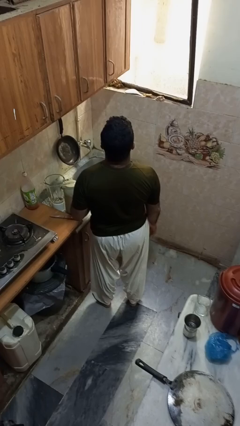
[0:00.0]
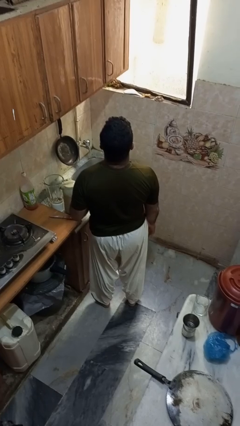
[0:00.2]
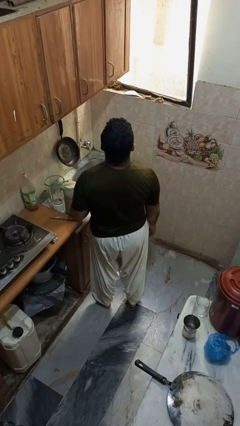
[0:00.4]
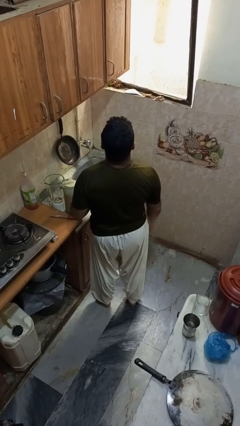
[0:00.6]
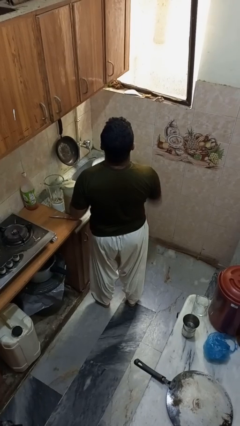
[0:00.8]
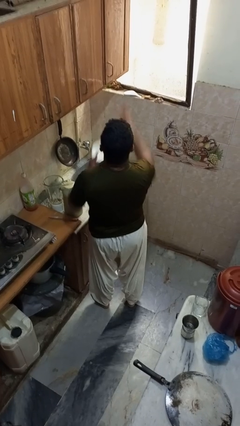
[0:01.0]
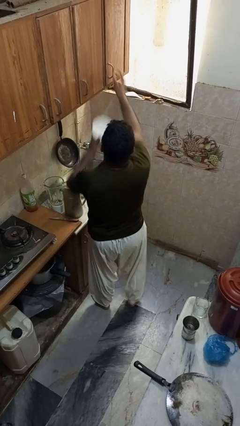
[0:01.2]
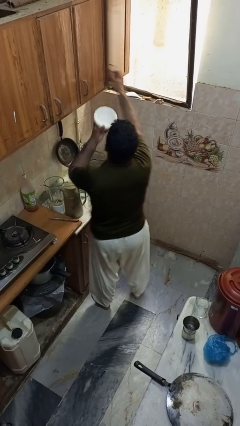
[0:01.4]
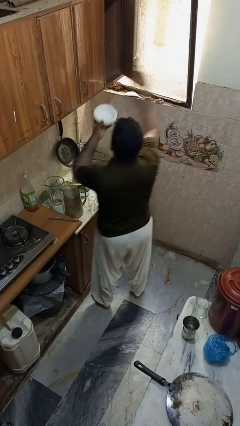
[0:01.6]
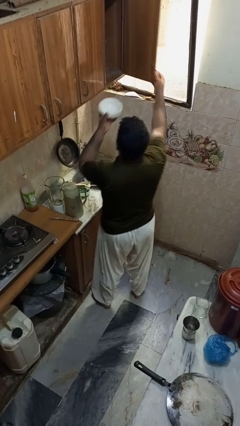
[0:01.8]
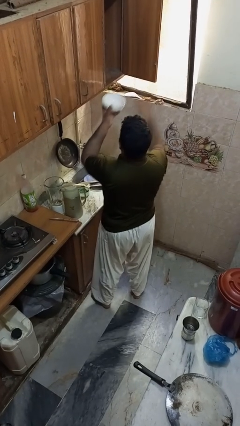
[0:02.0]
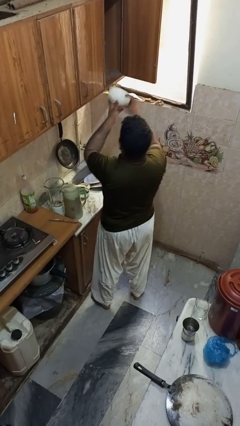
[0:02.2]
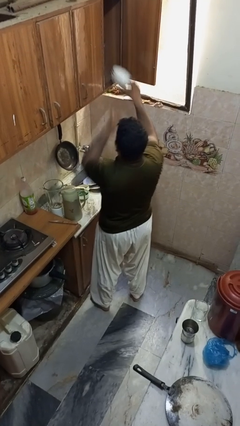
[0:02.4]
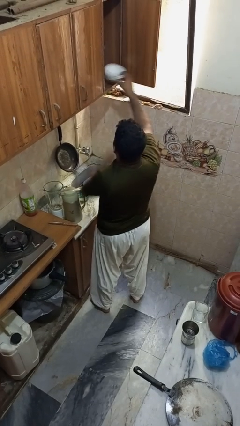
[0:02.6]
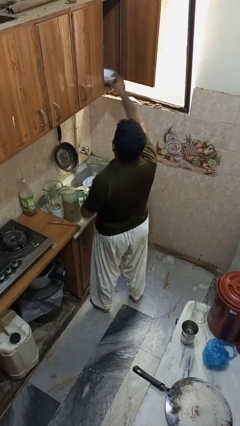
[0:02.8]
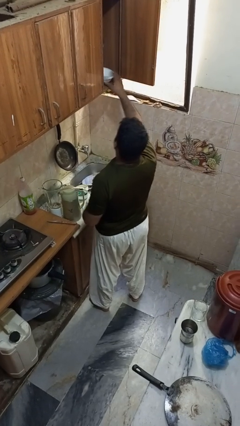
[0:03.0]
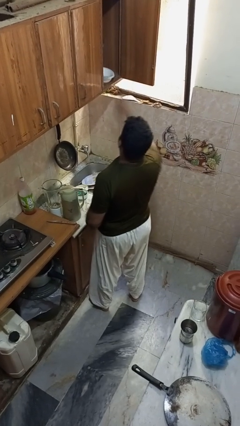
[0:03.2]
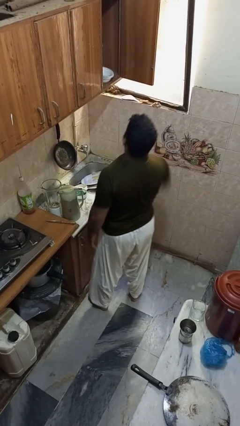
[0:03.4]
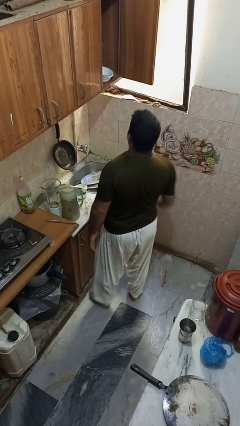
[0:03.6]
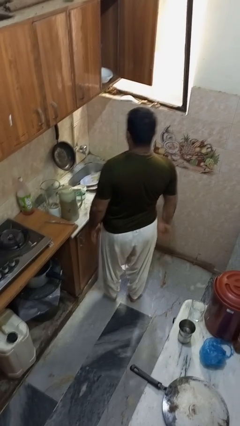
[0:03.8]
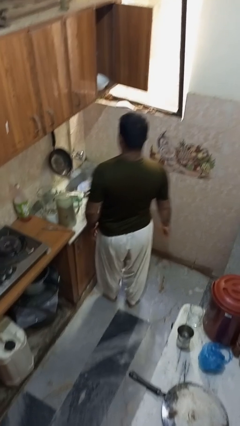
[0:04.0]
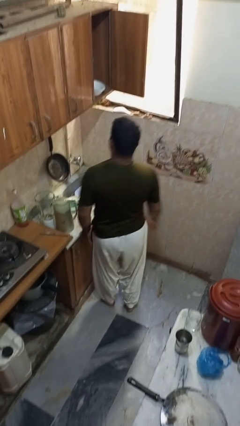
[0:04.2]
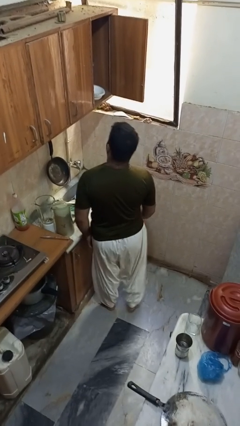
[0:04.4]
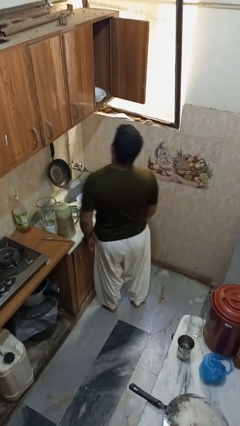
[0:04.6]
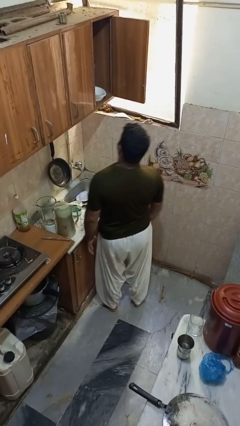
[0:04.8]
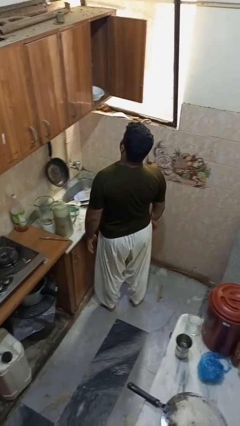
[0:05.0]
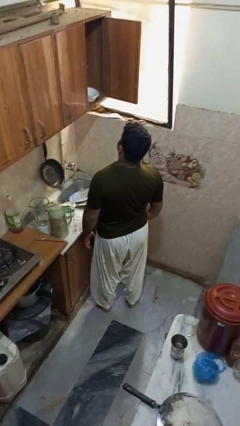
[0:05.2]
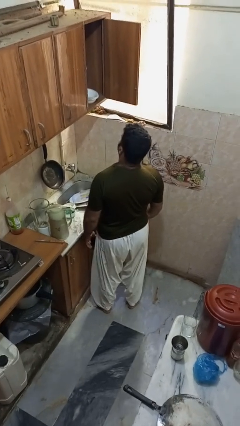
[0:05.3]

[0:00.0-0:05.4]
person puts object in cabinet

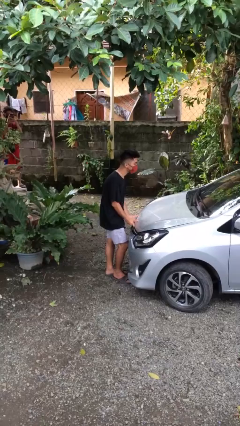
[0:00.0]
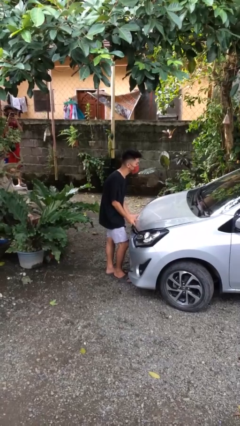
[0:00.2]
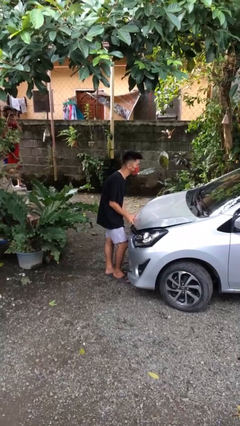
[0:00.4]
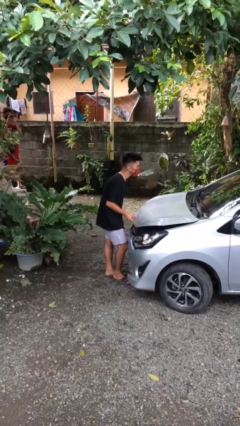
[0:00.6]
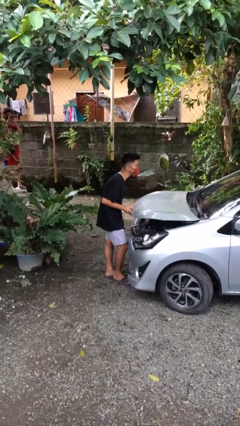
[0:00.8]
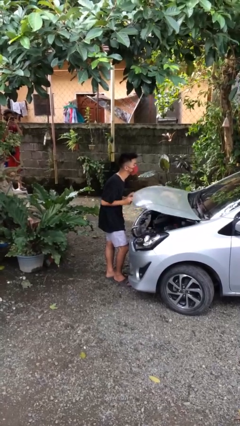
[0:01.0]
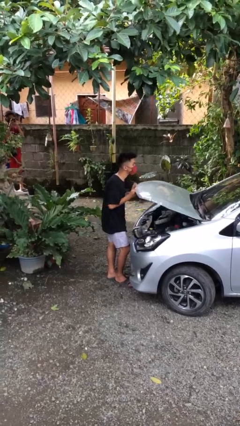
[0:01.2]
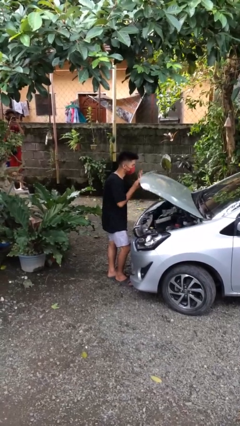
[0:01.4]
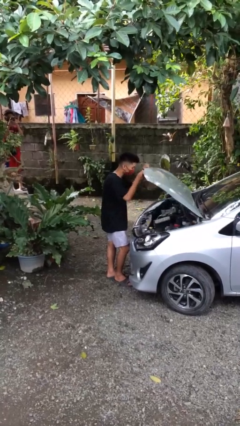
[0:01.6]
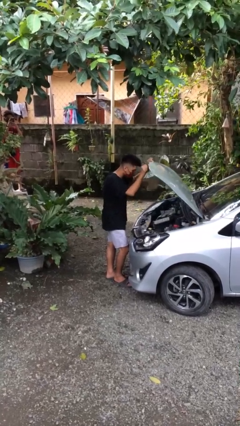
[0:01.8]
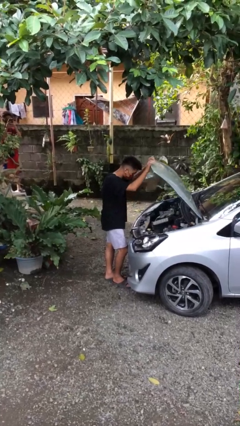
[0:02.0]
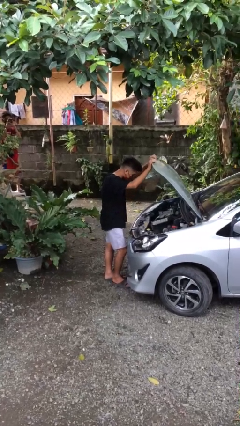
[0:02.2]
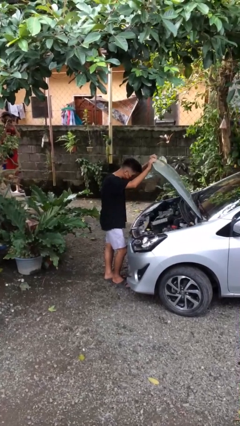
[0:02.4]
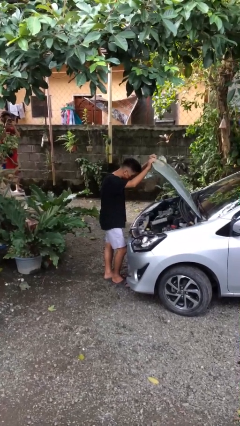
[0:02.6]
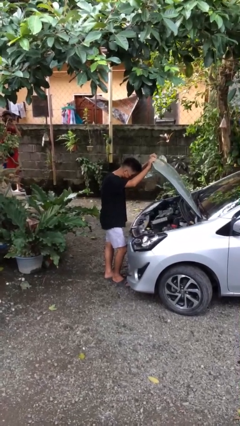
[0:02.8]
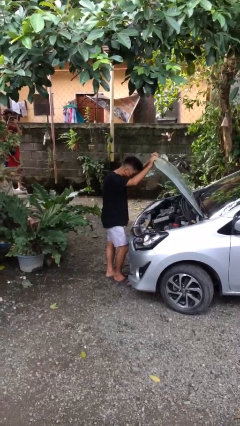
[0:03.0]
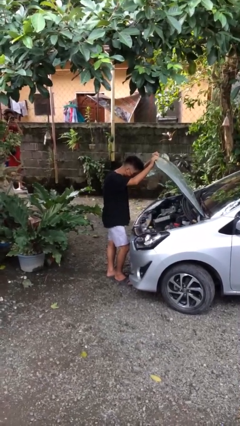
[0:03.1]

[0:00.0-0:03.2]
person opens car hood

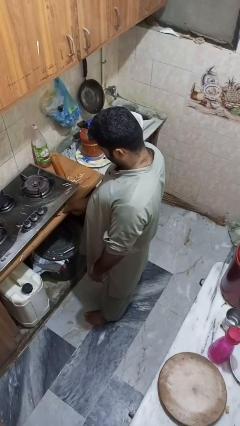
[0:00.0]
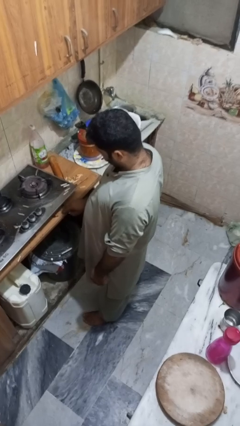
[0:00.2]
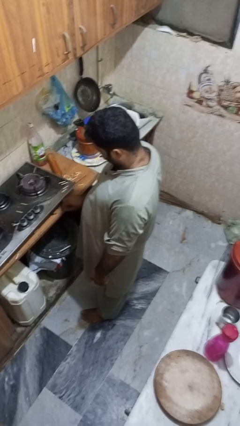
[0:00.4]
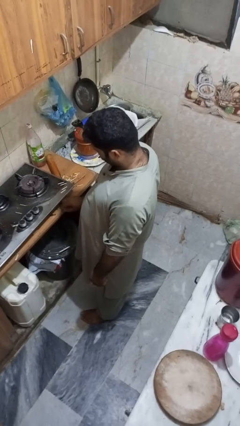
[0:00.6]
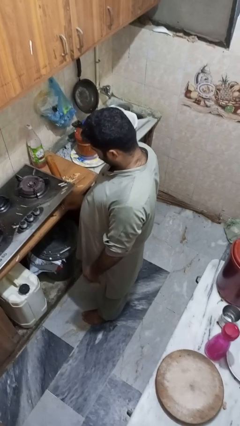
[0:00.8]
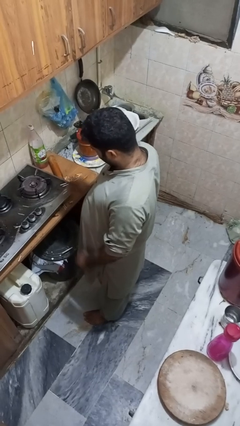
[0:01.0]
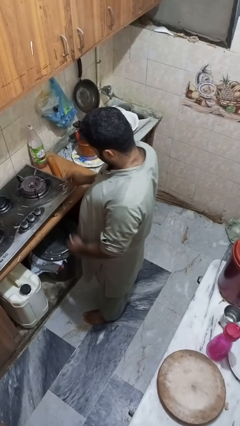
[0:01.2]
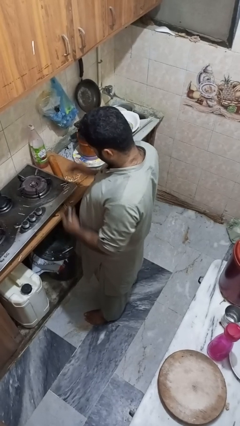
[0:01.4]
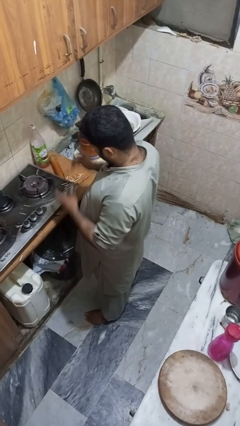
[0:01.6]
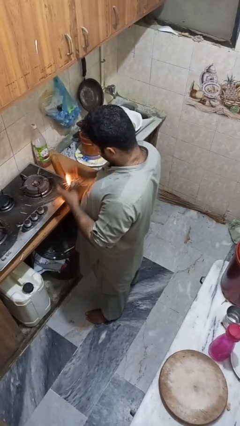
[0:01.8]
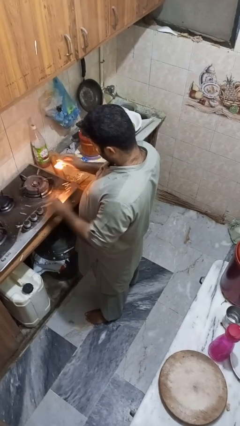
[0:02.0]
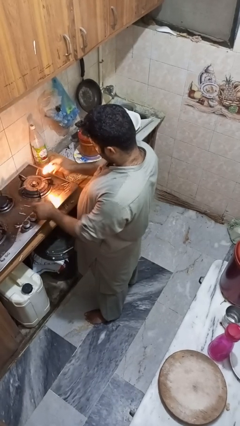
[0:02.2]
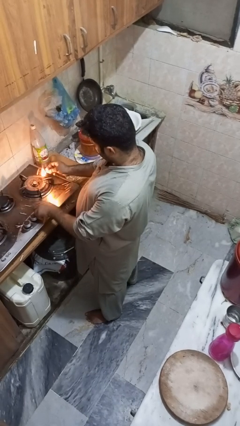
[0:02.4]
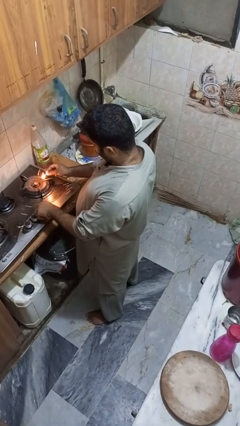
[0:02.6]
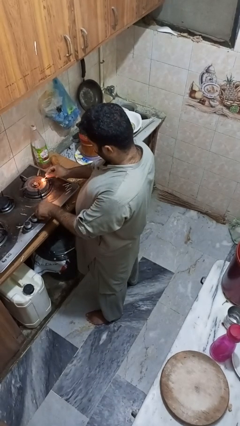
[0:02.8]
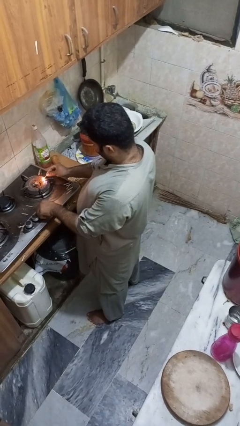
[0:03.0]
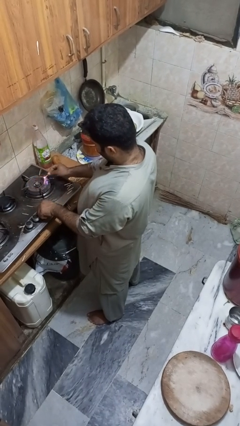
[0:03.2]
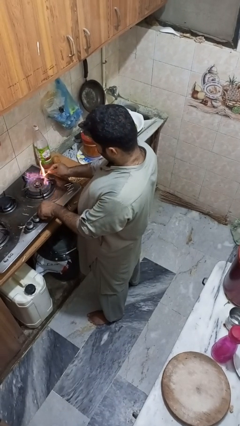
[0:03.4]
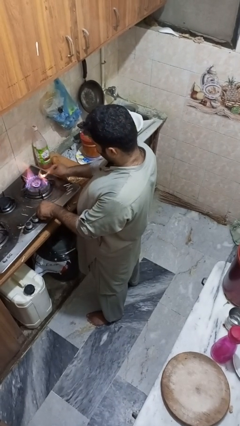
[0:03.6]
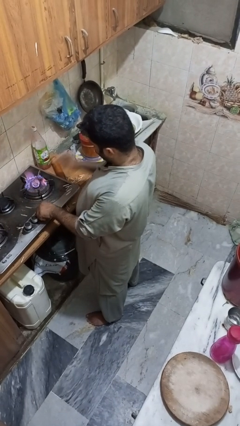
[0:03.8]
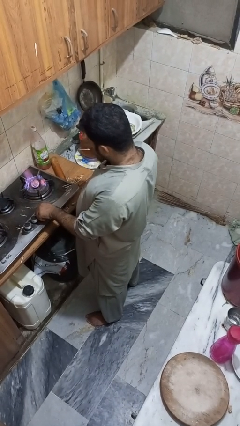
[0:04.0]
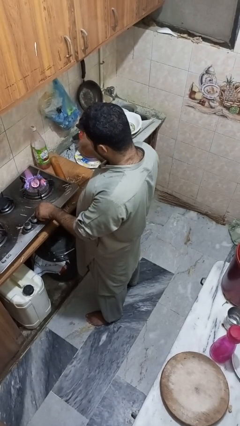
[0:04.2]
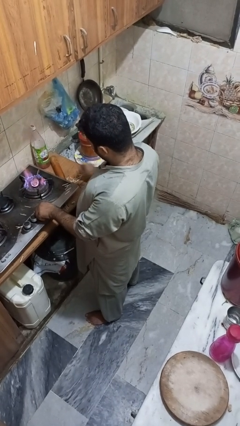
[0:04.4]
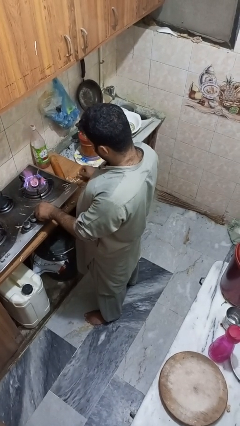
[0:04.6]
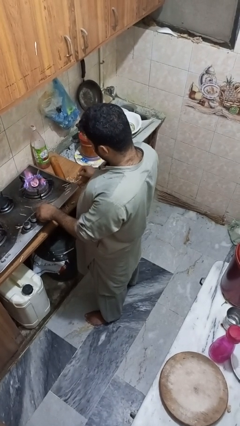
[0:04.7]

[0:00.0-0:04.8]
person turns on stovetop

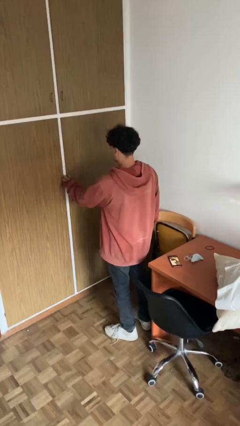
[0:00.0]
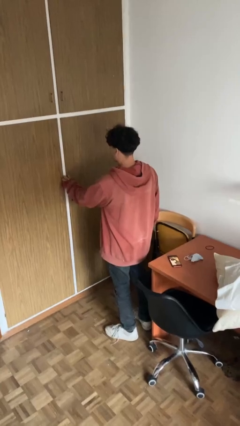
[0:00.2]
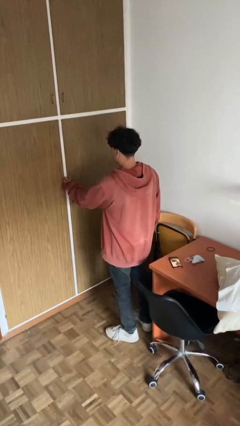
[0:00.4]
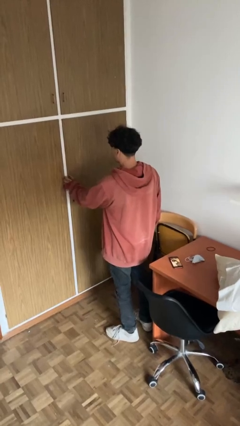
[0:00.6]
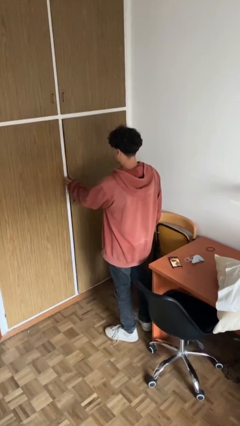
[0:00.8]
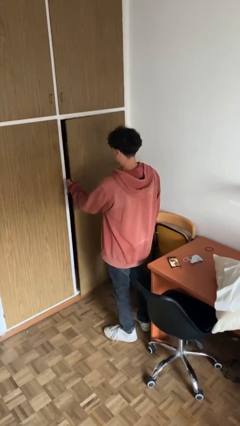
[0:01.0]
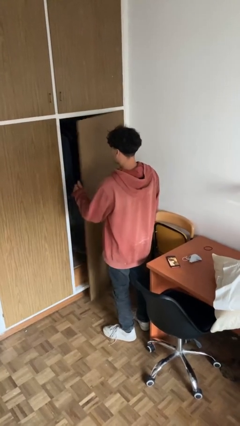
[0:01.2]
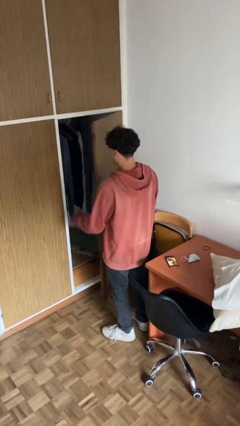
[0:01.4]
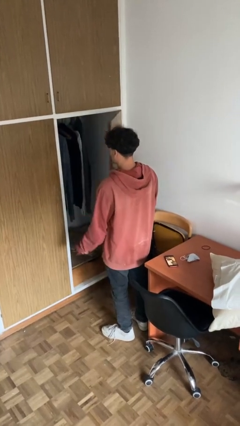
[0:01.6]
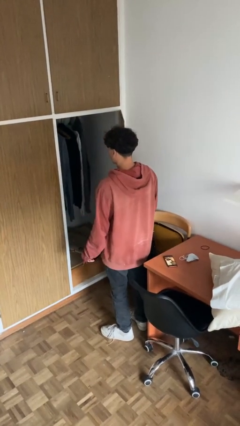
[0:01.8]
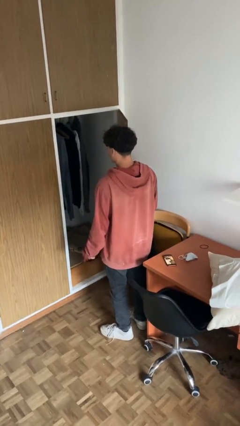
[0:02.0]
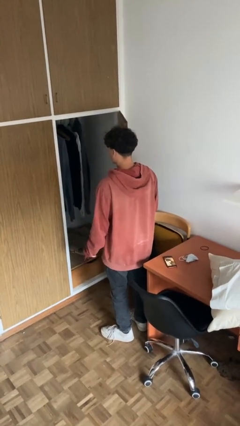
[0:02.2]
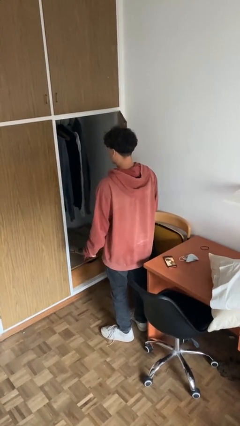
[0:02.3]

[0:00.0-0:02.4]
person opens closet door

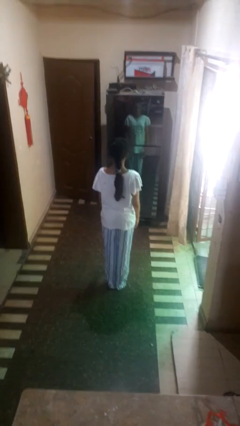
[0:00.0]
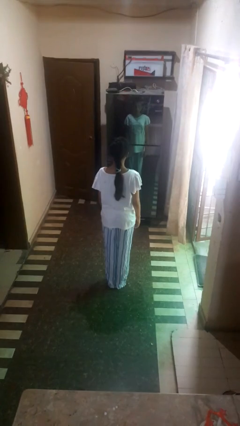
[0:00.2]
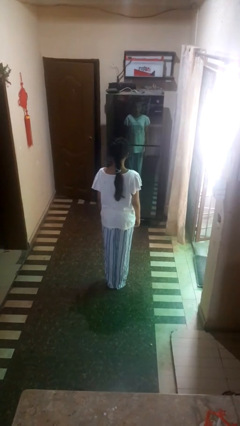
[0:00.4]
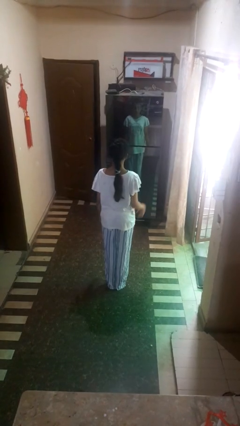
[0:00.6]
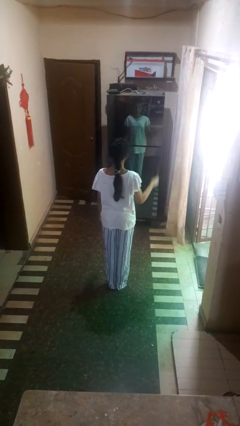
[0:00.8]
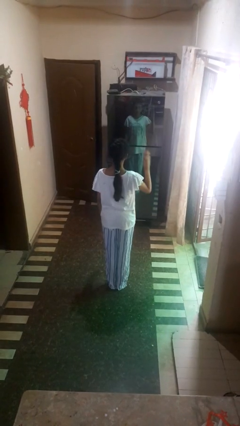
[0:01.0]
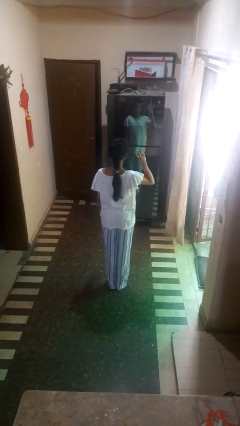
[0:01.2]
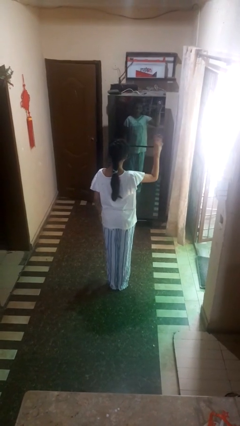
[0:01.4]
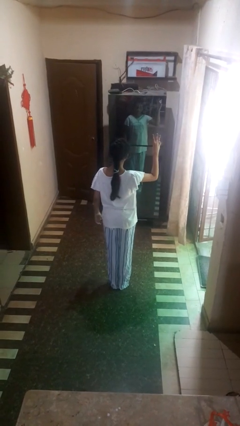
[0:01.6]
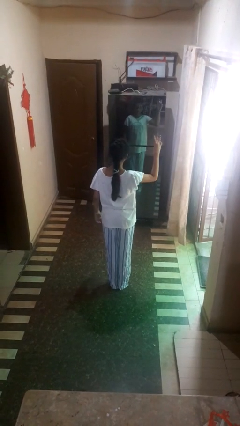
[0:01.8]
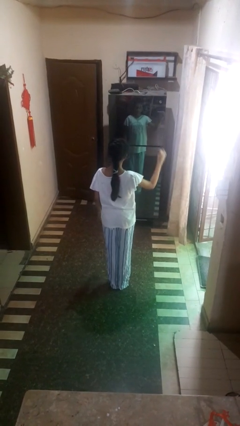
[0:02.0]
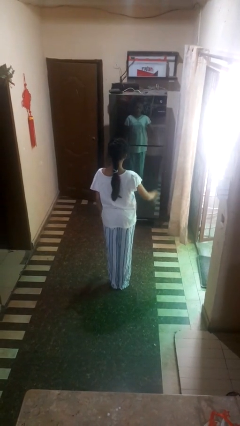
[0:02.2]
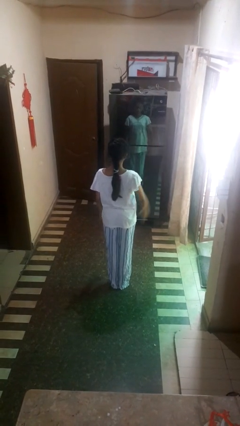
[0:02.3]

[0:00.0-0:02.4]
person gestures number three
